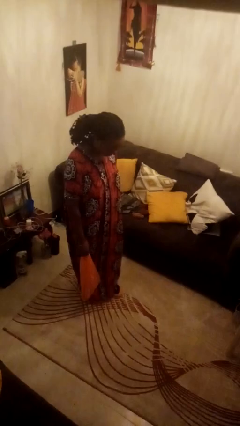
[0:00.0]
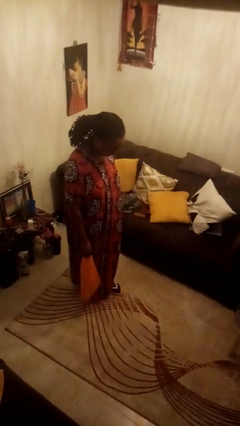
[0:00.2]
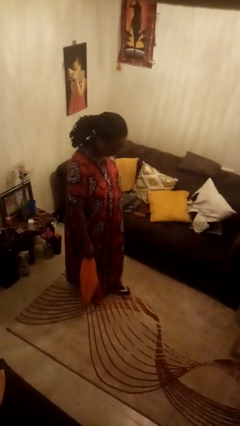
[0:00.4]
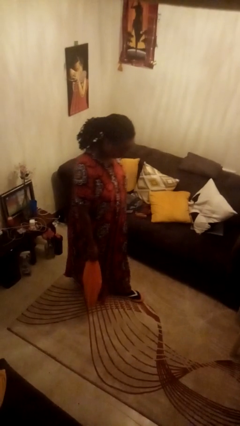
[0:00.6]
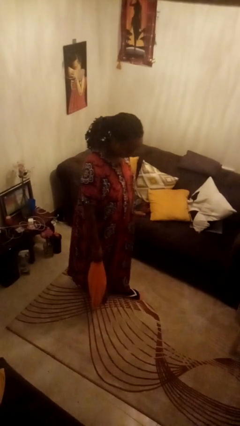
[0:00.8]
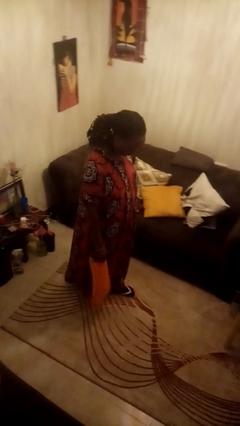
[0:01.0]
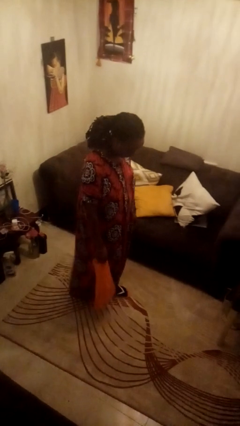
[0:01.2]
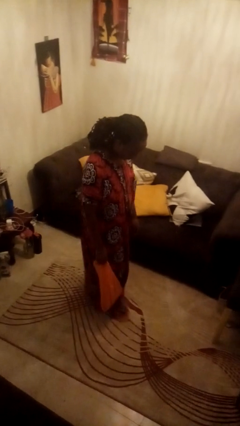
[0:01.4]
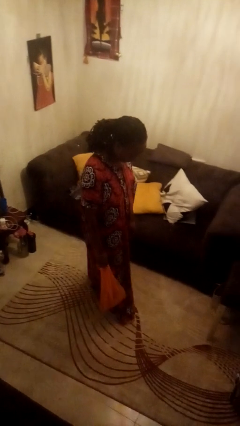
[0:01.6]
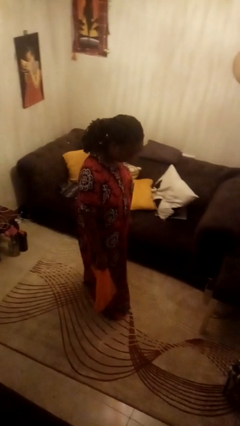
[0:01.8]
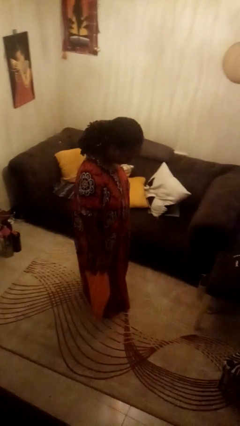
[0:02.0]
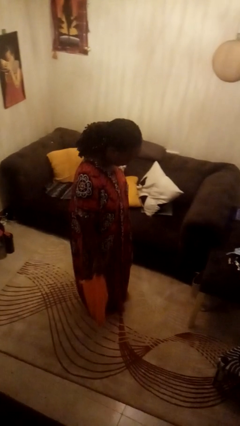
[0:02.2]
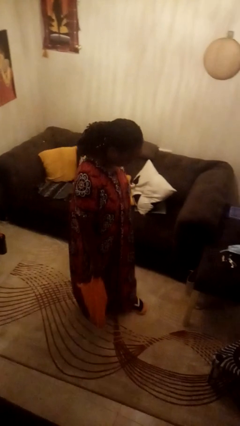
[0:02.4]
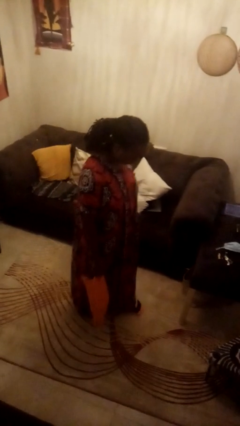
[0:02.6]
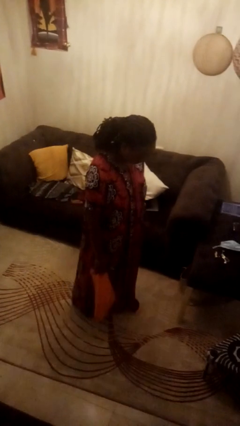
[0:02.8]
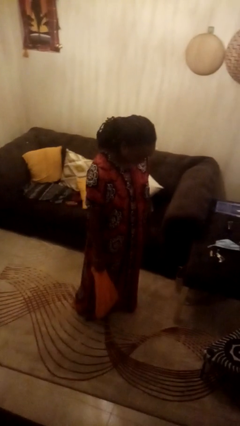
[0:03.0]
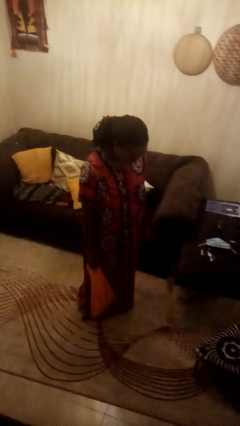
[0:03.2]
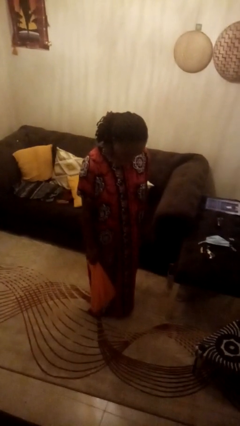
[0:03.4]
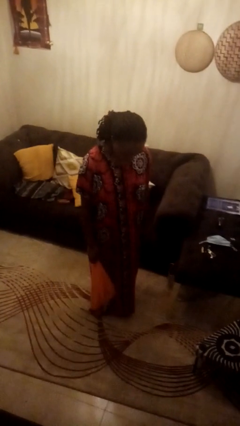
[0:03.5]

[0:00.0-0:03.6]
person carries groceries

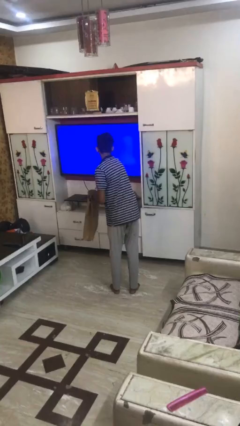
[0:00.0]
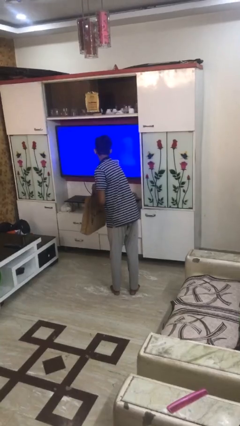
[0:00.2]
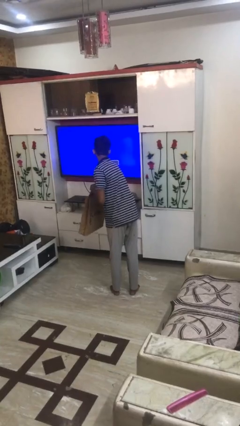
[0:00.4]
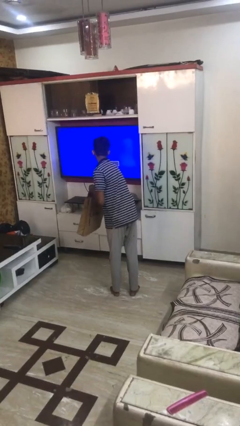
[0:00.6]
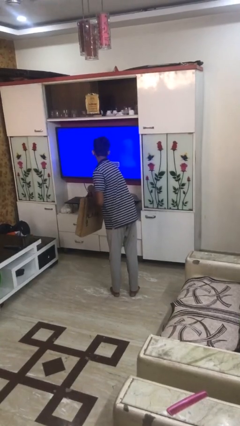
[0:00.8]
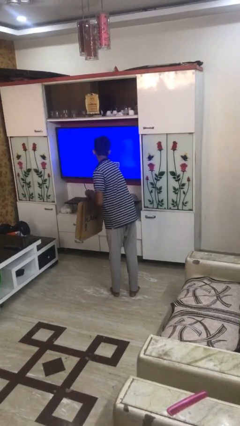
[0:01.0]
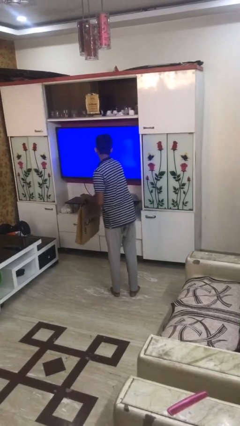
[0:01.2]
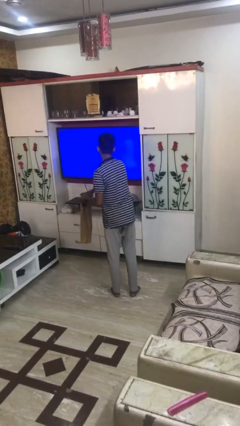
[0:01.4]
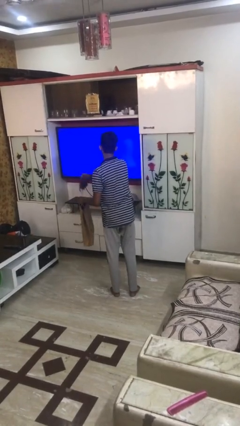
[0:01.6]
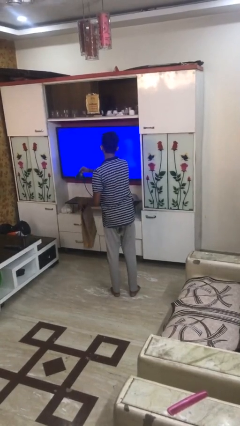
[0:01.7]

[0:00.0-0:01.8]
person takes object from bag

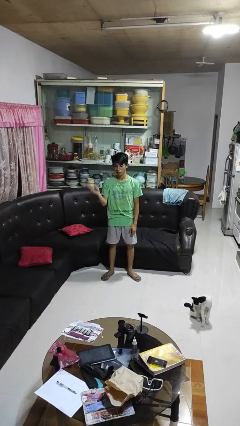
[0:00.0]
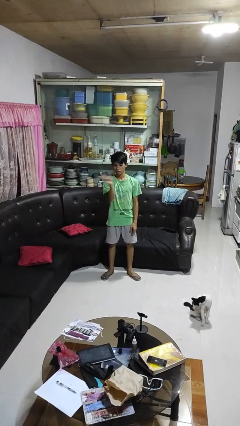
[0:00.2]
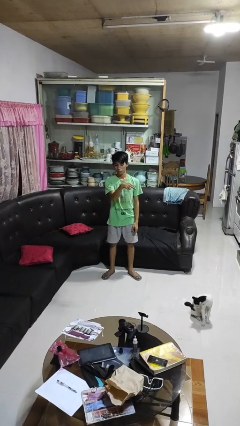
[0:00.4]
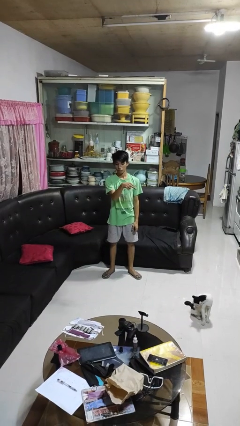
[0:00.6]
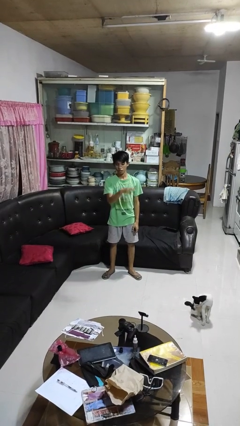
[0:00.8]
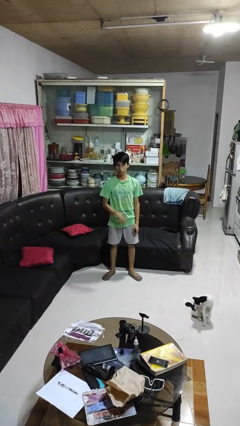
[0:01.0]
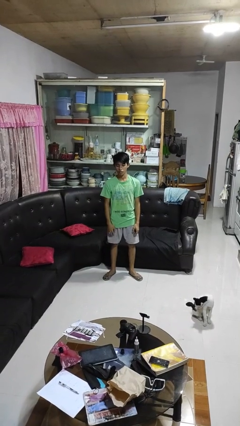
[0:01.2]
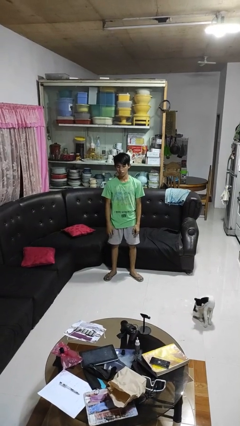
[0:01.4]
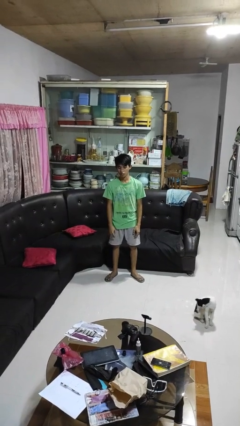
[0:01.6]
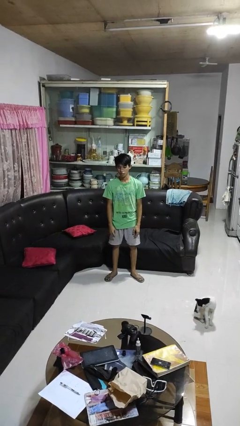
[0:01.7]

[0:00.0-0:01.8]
person gestures swipe left

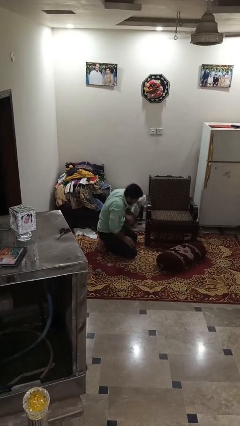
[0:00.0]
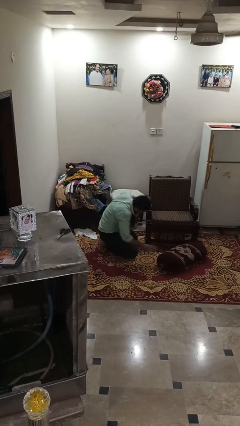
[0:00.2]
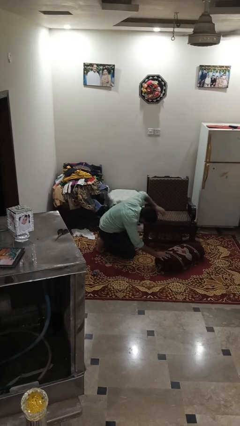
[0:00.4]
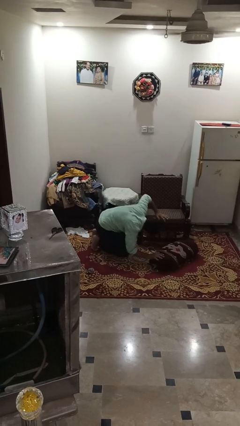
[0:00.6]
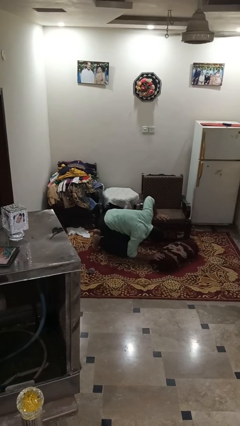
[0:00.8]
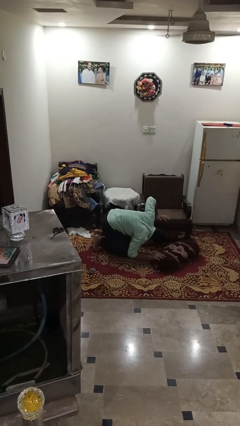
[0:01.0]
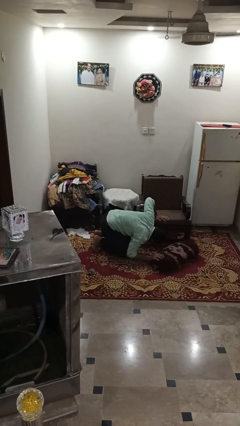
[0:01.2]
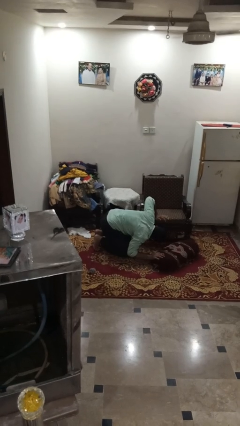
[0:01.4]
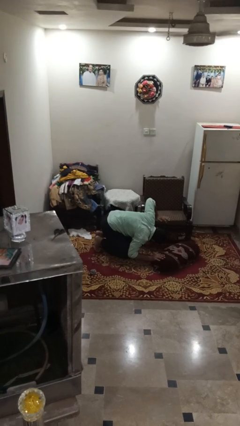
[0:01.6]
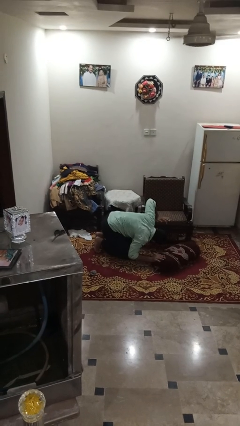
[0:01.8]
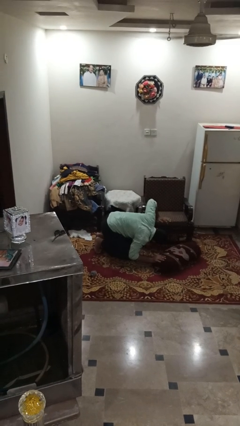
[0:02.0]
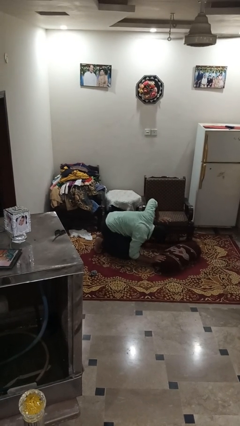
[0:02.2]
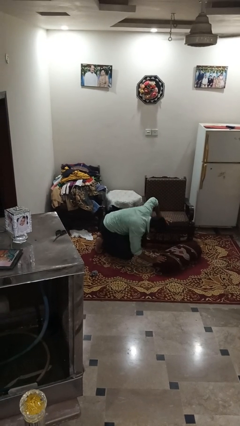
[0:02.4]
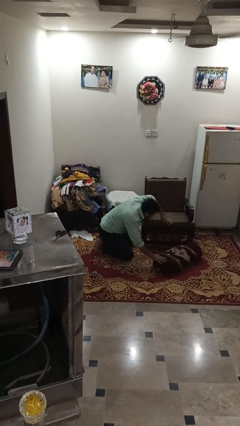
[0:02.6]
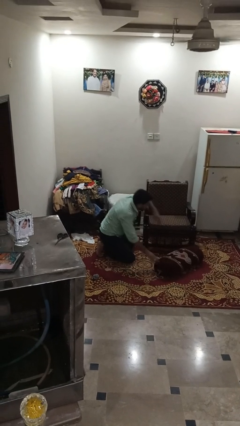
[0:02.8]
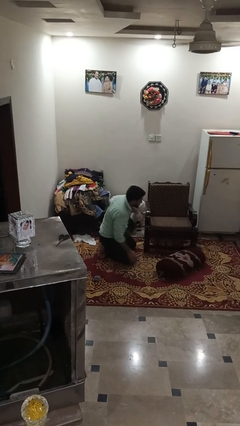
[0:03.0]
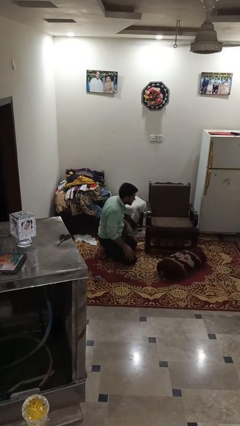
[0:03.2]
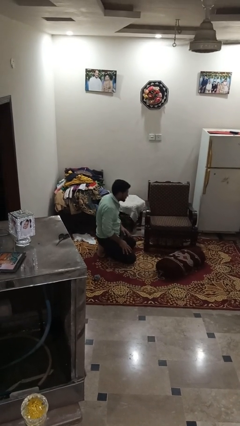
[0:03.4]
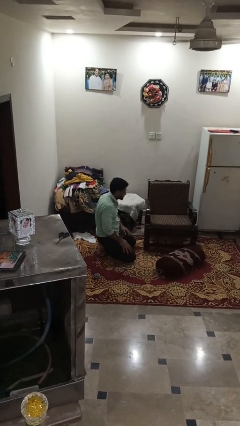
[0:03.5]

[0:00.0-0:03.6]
person searches in couch

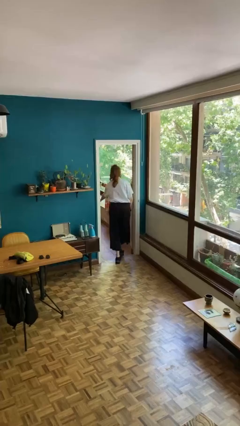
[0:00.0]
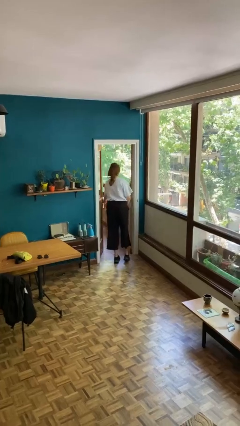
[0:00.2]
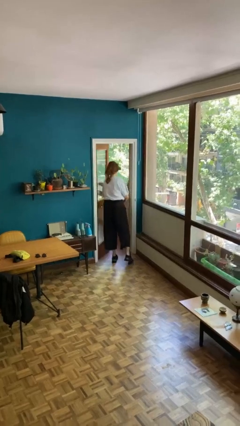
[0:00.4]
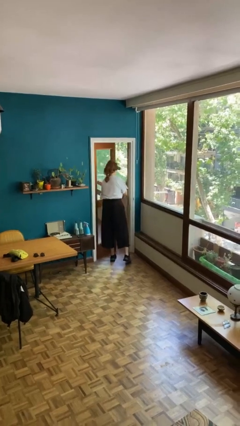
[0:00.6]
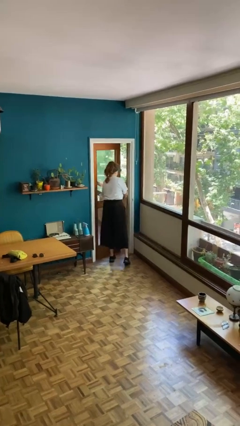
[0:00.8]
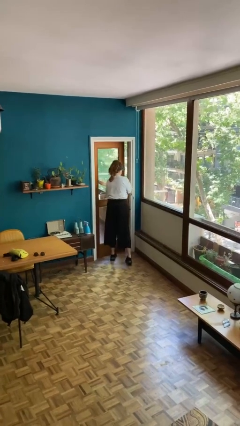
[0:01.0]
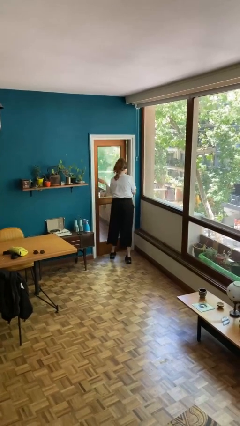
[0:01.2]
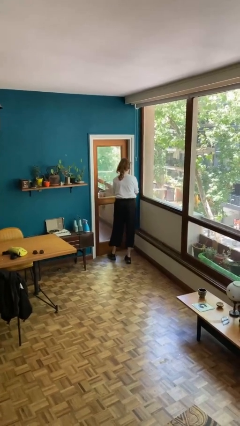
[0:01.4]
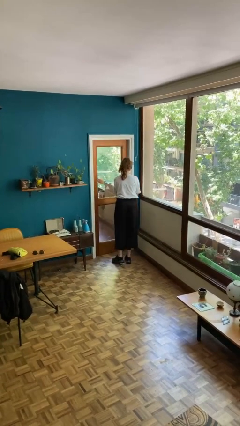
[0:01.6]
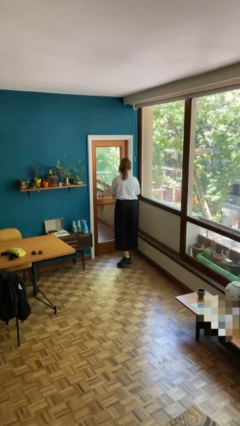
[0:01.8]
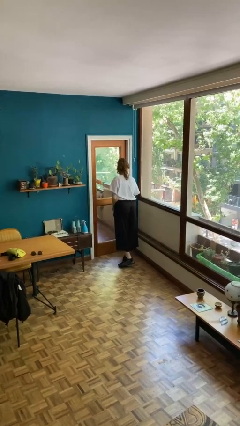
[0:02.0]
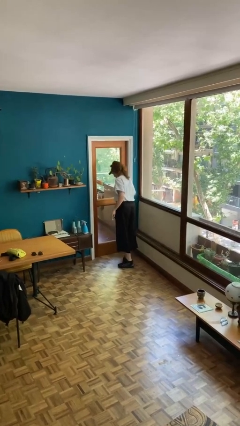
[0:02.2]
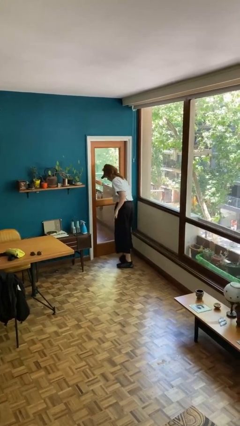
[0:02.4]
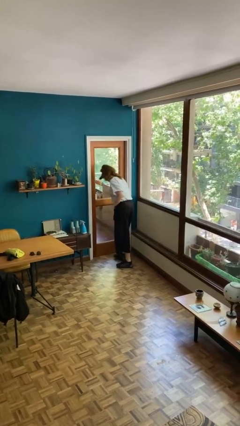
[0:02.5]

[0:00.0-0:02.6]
person closes facility door

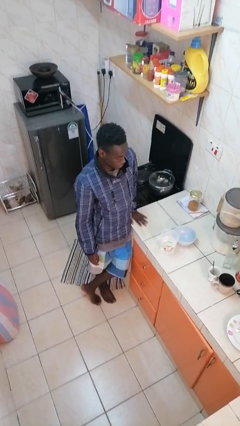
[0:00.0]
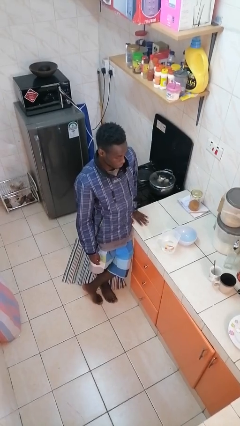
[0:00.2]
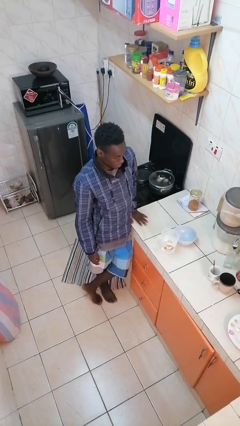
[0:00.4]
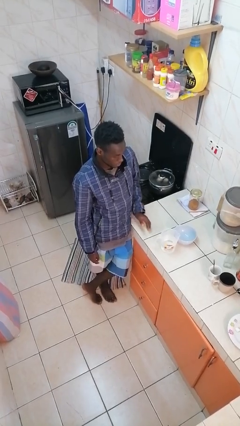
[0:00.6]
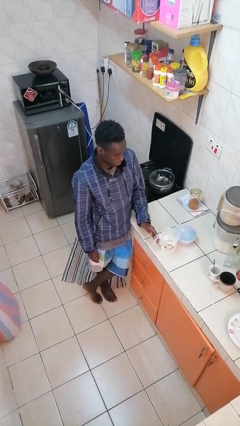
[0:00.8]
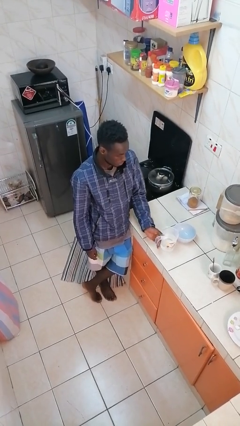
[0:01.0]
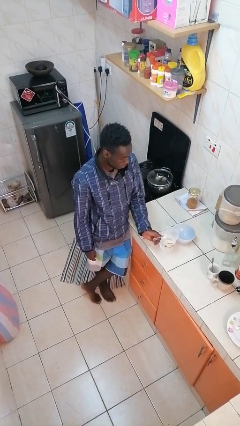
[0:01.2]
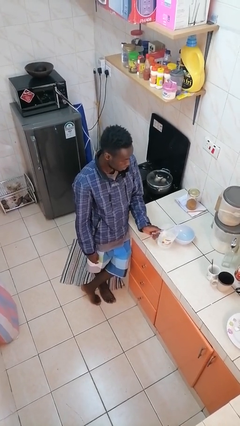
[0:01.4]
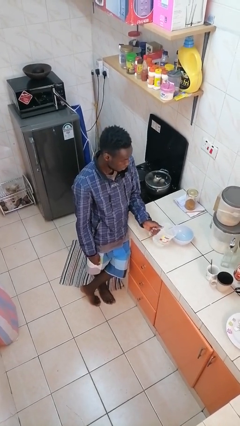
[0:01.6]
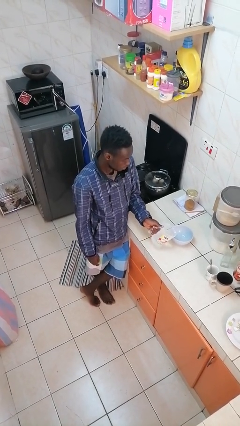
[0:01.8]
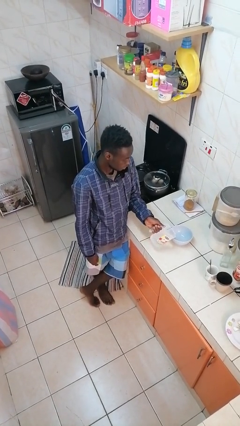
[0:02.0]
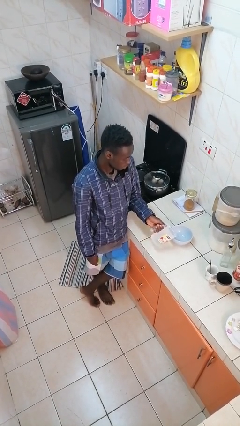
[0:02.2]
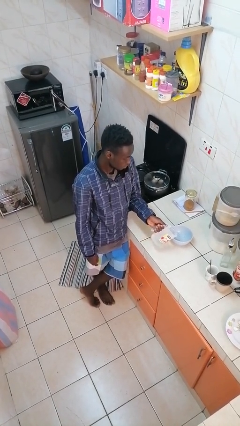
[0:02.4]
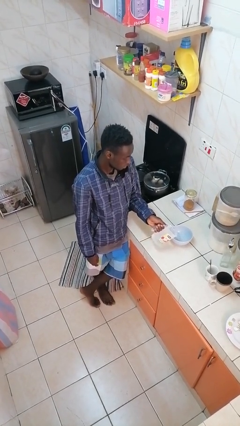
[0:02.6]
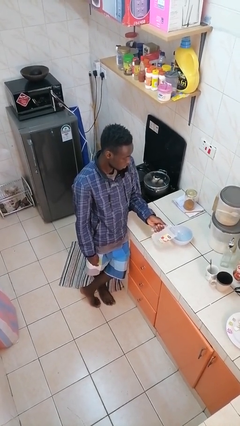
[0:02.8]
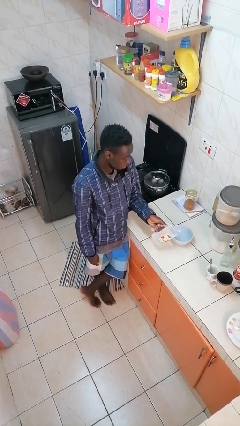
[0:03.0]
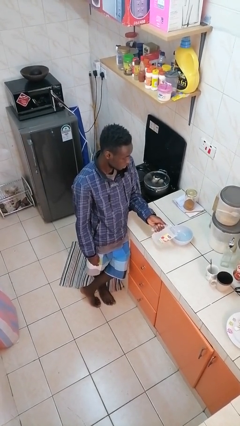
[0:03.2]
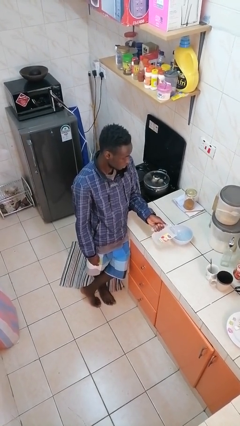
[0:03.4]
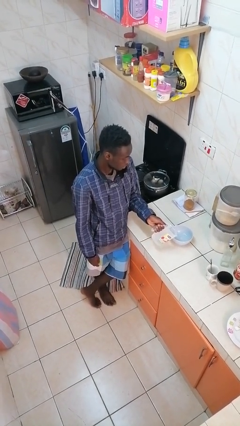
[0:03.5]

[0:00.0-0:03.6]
person pours into bowl

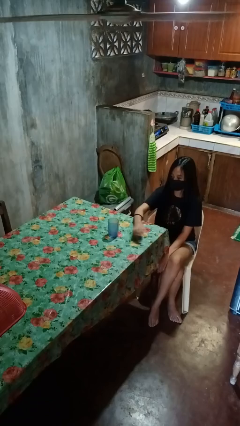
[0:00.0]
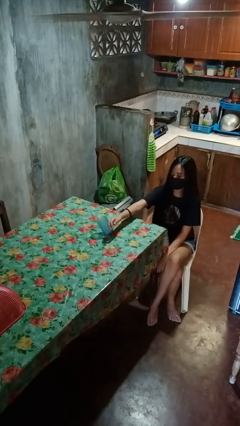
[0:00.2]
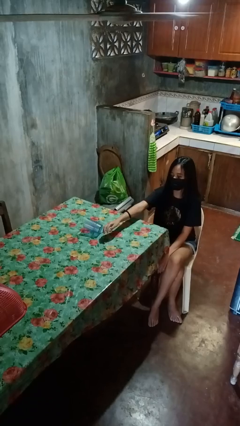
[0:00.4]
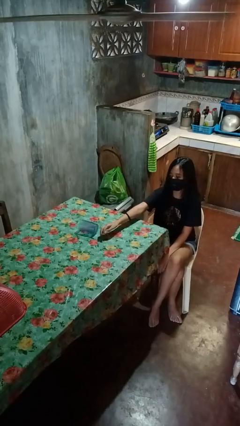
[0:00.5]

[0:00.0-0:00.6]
person knocks over glass
